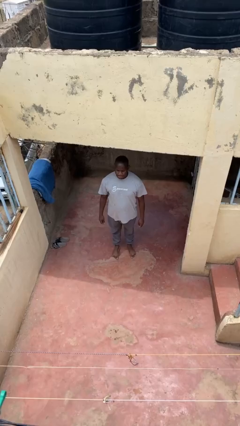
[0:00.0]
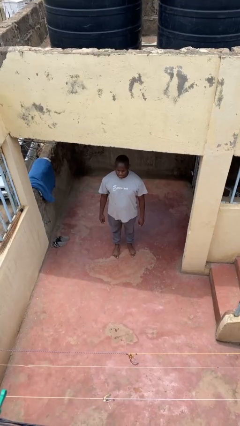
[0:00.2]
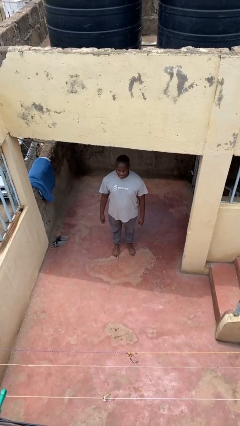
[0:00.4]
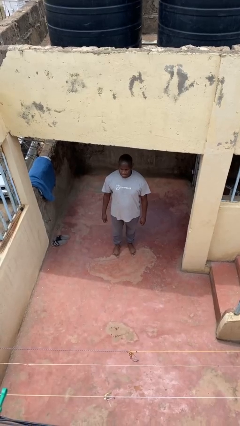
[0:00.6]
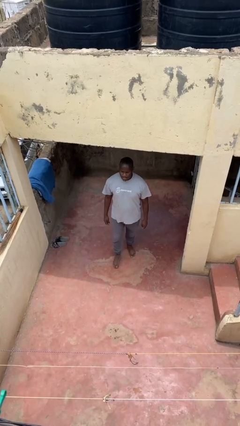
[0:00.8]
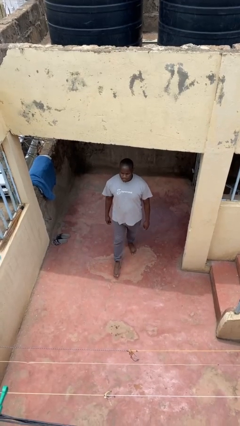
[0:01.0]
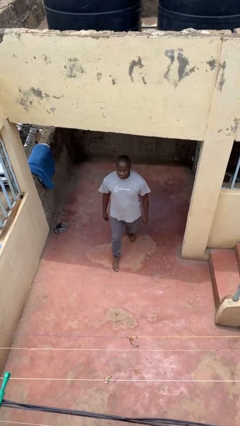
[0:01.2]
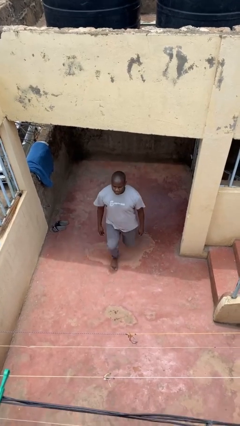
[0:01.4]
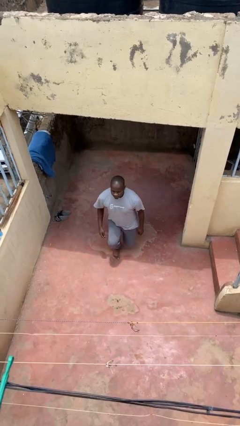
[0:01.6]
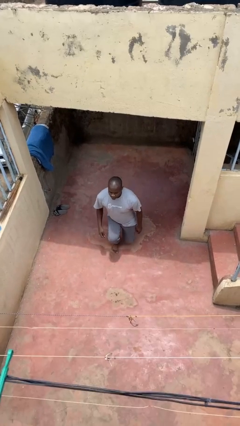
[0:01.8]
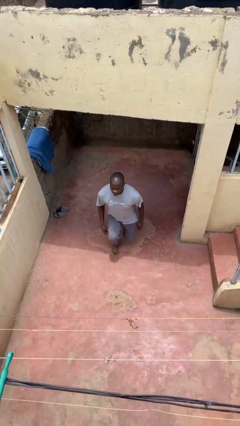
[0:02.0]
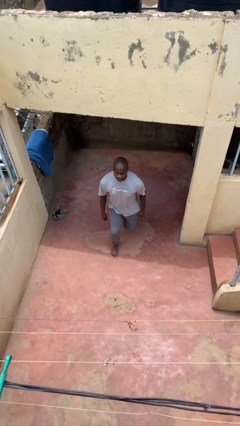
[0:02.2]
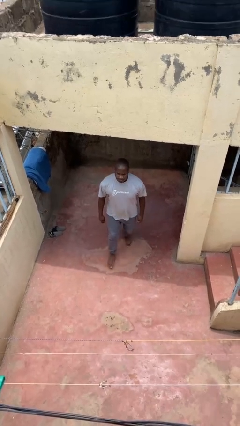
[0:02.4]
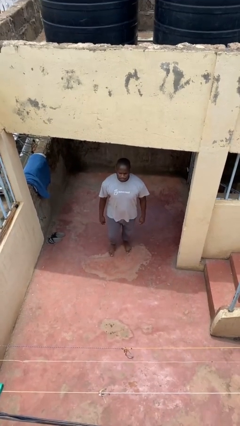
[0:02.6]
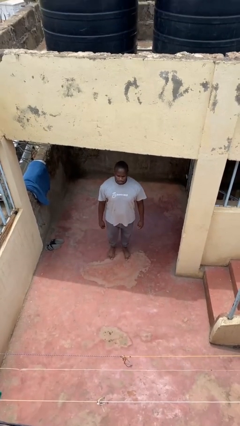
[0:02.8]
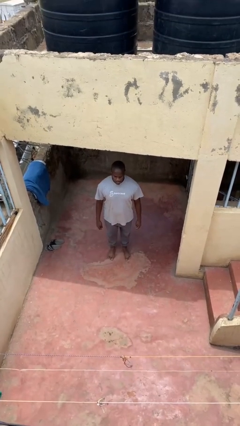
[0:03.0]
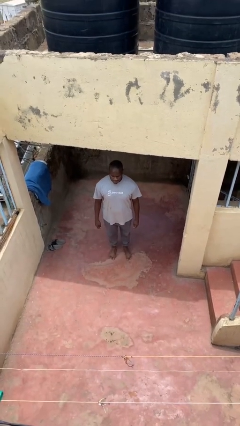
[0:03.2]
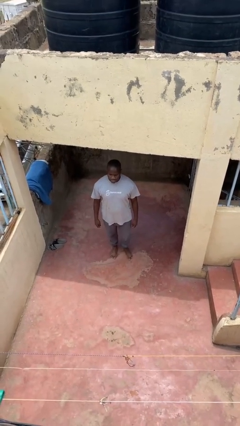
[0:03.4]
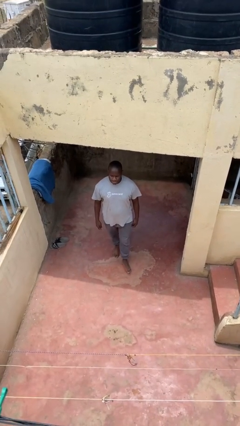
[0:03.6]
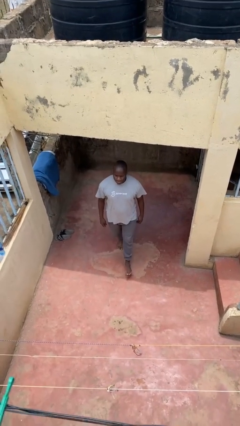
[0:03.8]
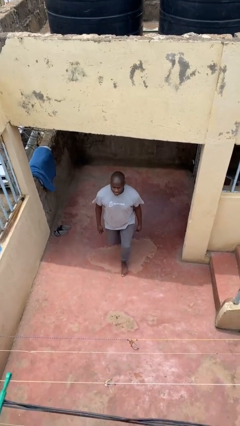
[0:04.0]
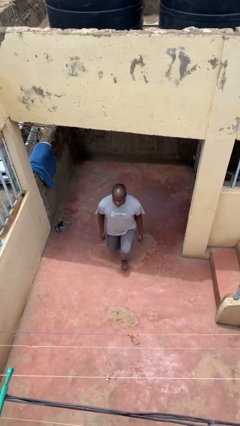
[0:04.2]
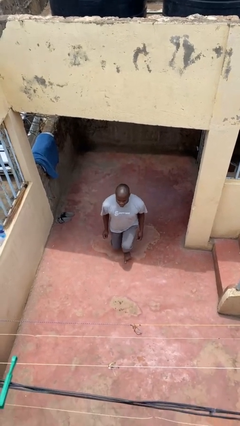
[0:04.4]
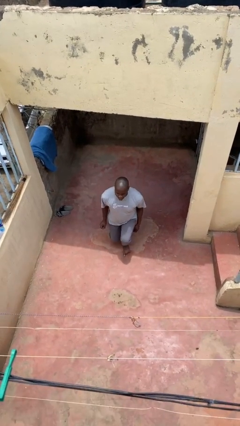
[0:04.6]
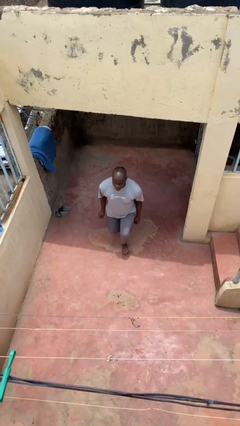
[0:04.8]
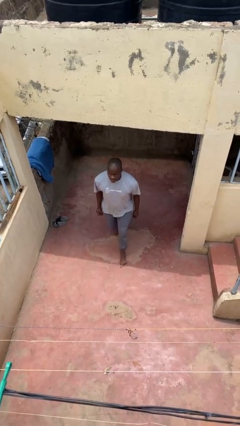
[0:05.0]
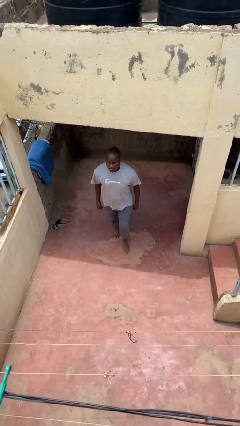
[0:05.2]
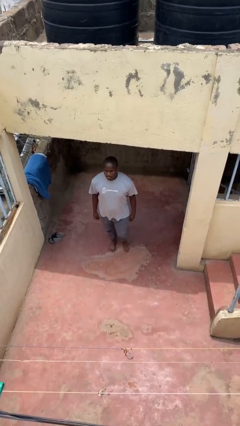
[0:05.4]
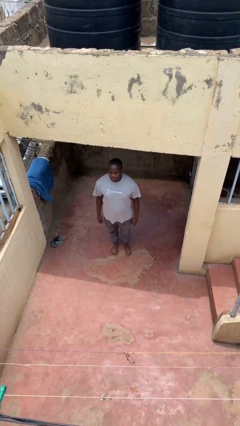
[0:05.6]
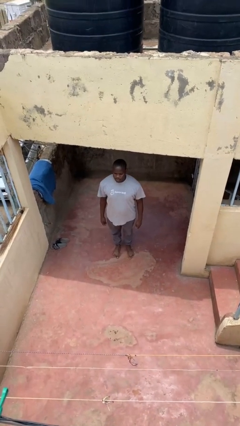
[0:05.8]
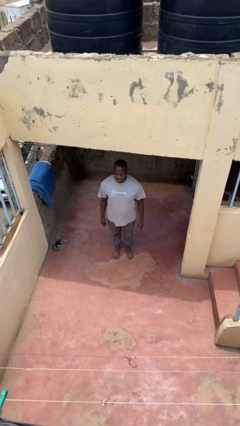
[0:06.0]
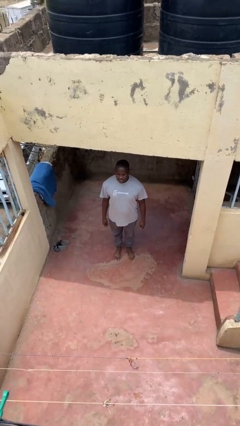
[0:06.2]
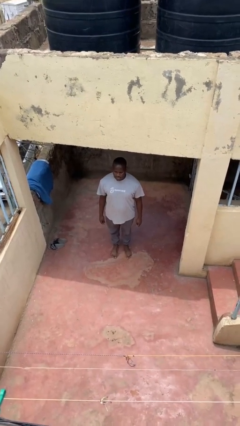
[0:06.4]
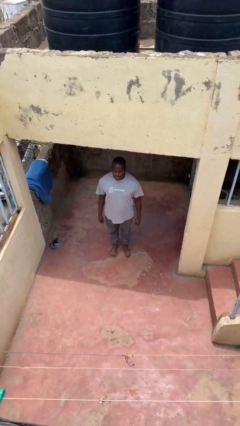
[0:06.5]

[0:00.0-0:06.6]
person exercises with lunges

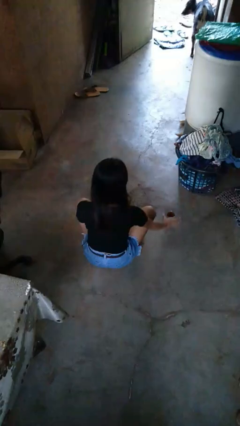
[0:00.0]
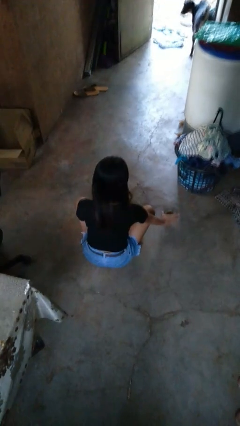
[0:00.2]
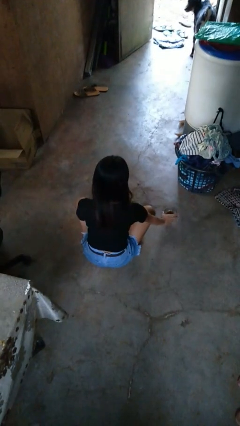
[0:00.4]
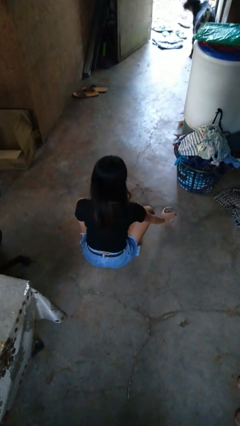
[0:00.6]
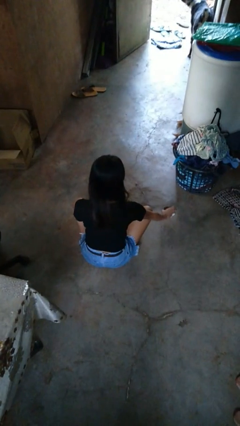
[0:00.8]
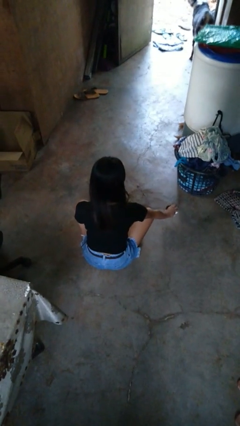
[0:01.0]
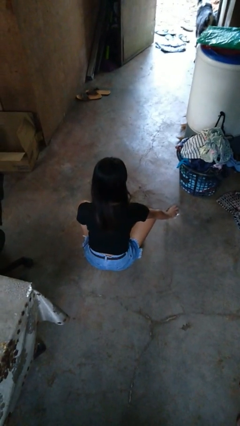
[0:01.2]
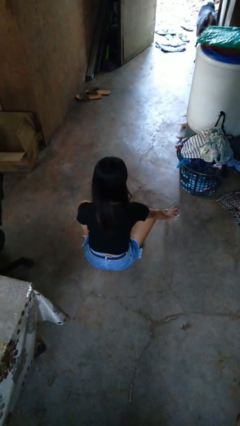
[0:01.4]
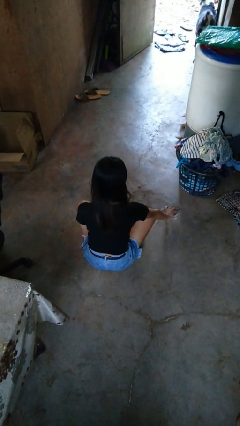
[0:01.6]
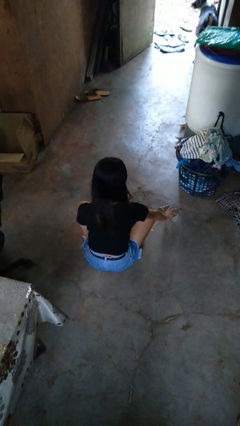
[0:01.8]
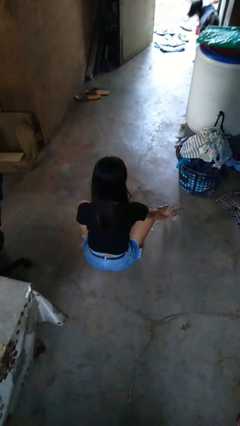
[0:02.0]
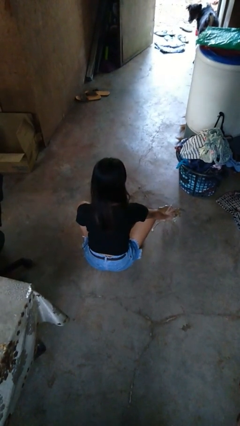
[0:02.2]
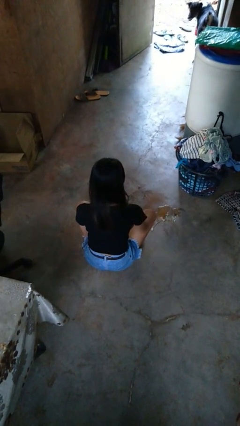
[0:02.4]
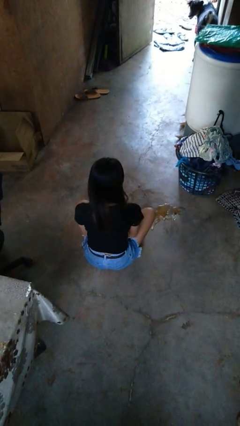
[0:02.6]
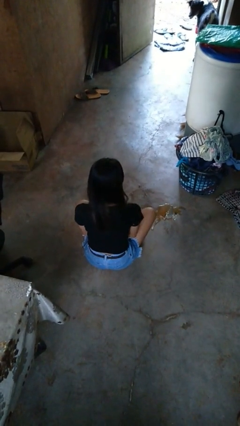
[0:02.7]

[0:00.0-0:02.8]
person spills on floor

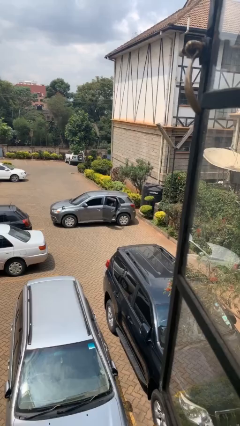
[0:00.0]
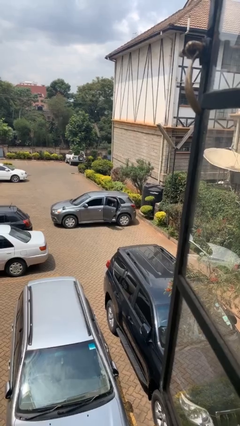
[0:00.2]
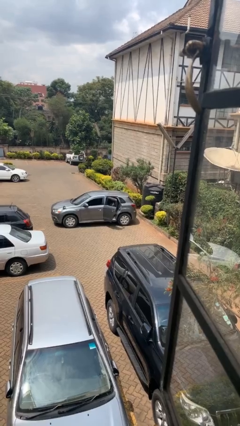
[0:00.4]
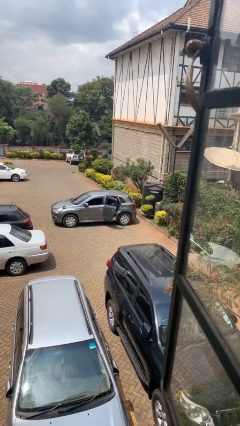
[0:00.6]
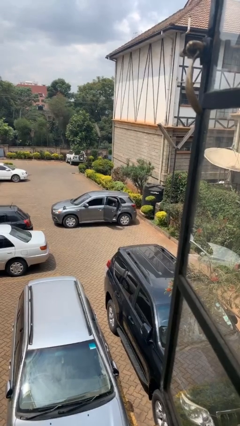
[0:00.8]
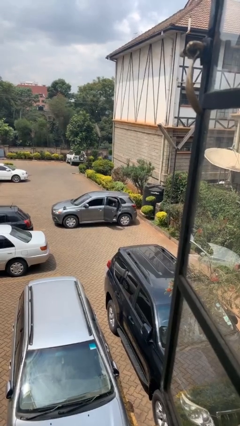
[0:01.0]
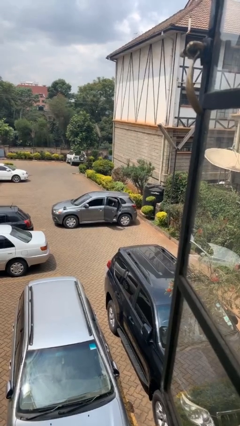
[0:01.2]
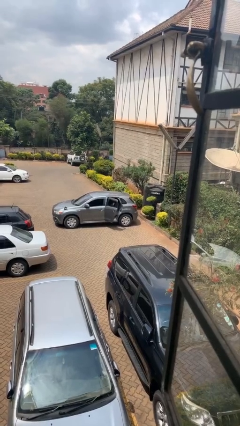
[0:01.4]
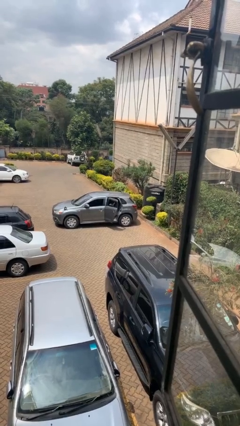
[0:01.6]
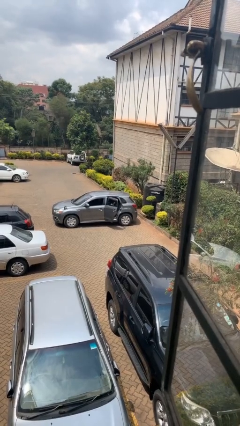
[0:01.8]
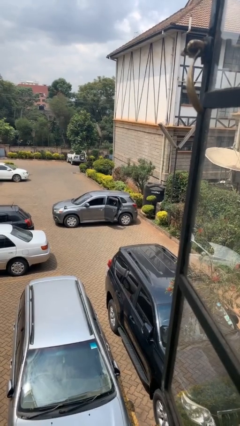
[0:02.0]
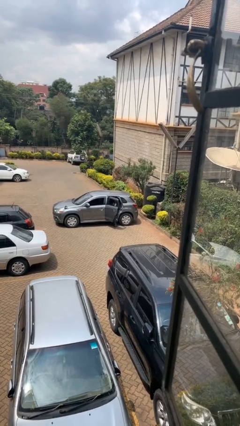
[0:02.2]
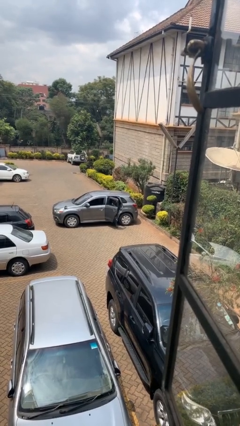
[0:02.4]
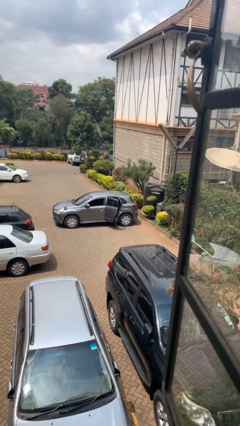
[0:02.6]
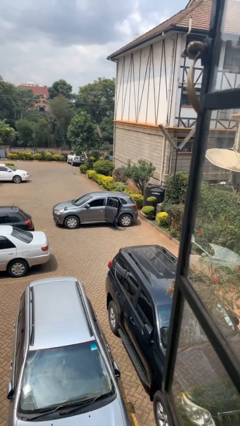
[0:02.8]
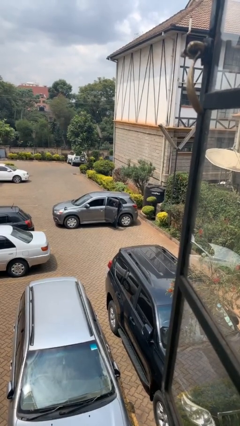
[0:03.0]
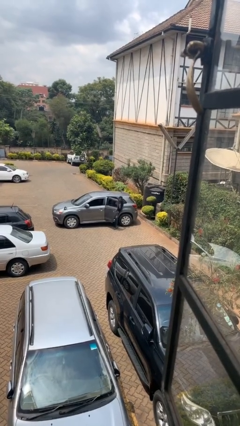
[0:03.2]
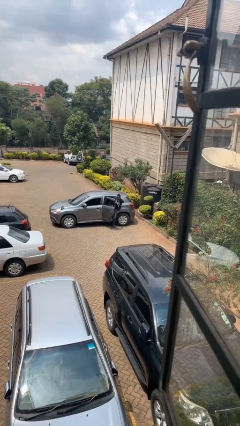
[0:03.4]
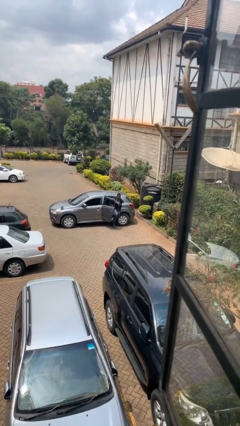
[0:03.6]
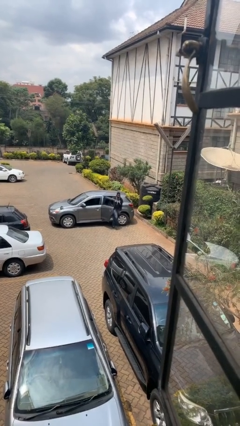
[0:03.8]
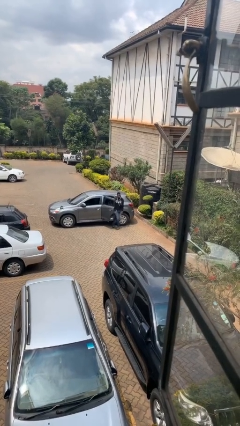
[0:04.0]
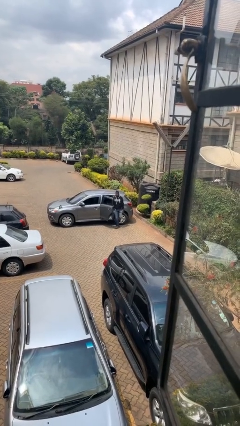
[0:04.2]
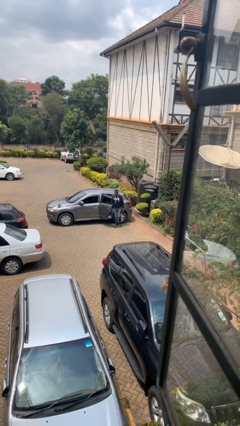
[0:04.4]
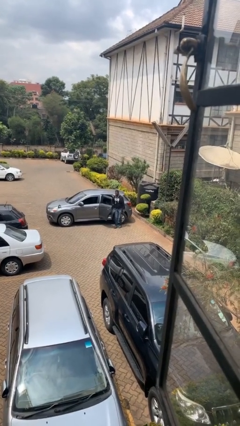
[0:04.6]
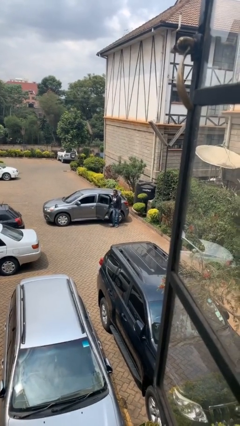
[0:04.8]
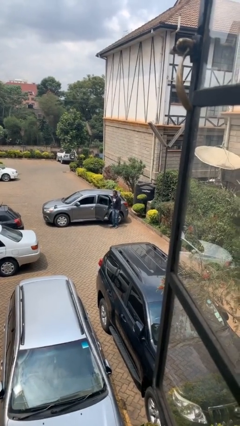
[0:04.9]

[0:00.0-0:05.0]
person exits car

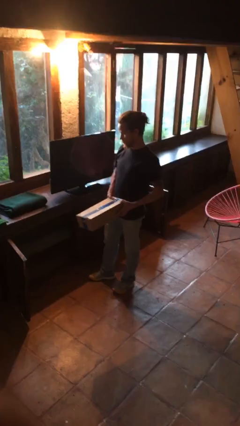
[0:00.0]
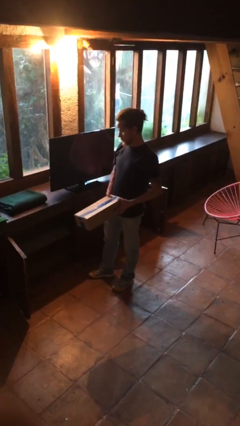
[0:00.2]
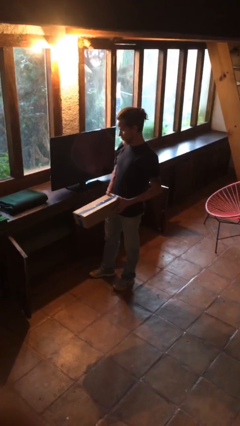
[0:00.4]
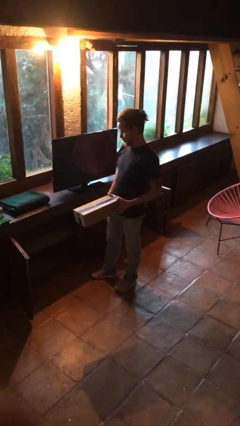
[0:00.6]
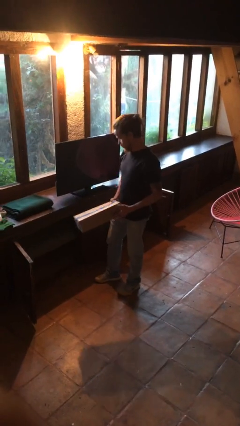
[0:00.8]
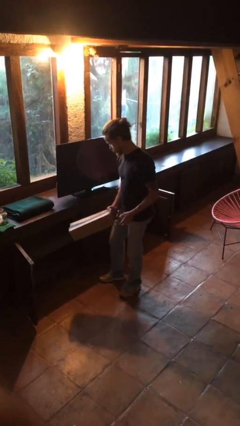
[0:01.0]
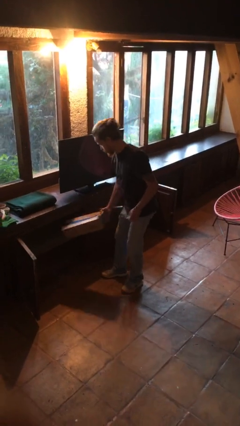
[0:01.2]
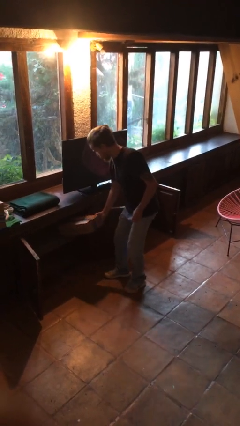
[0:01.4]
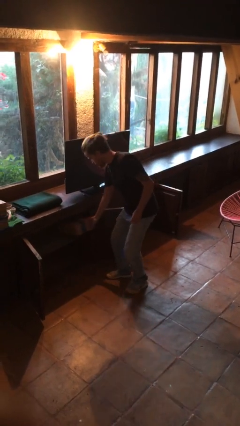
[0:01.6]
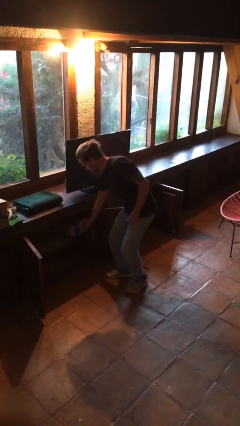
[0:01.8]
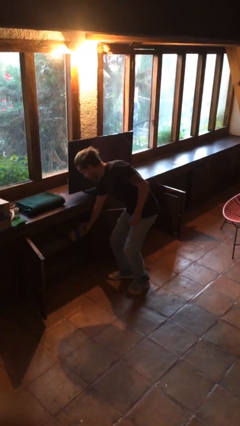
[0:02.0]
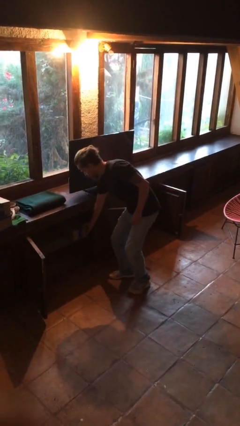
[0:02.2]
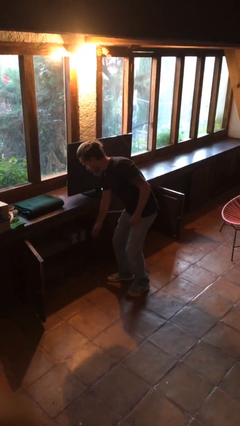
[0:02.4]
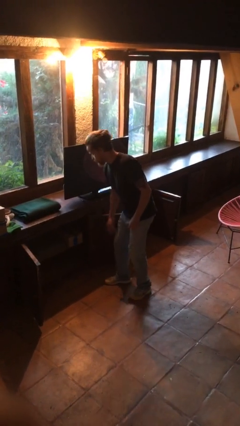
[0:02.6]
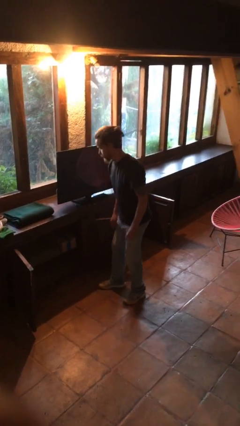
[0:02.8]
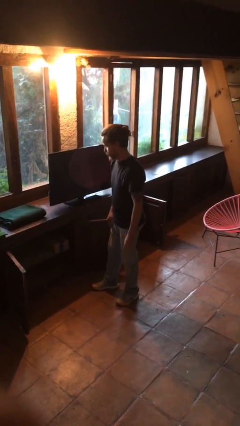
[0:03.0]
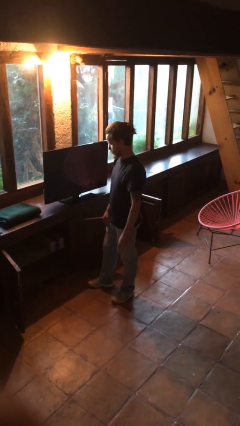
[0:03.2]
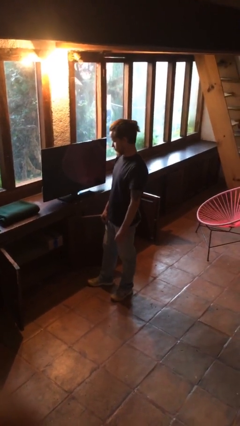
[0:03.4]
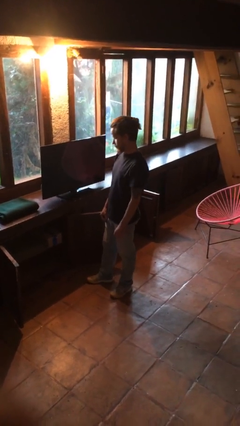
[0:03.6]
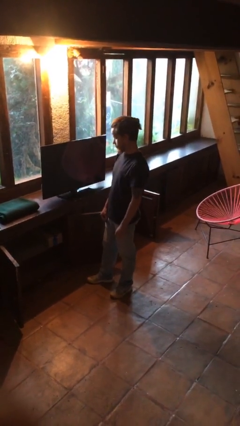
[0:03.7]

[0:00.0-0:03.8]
person puts down object into cabinet
